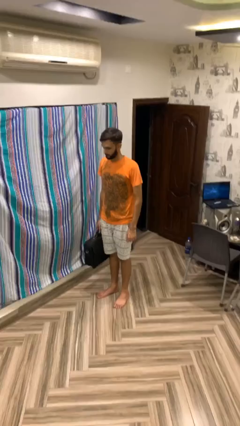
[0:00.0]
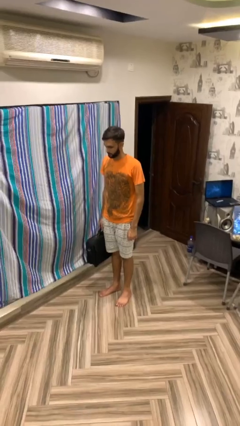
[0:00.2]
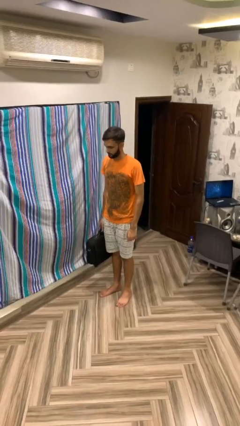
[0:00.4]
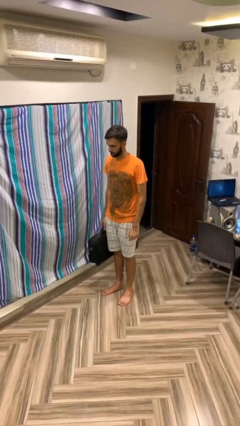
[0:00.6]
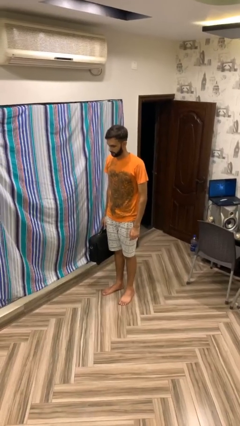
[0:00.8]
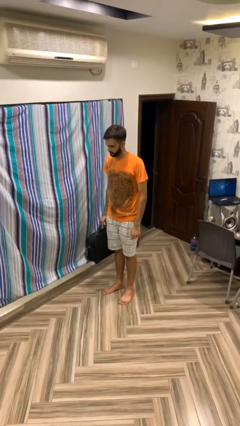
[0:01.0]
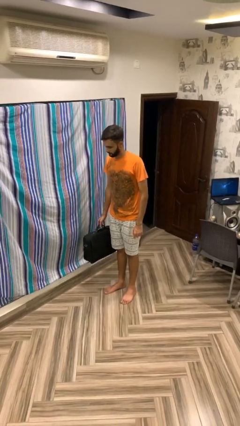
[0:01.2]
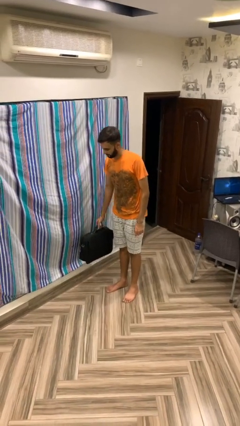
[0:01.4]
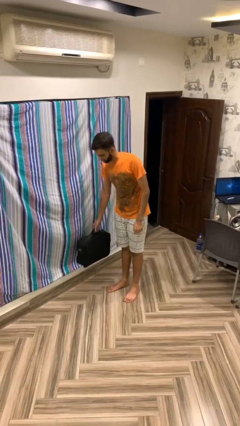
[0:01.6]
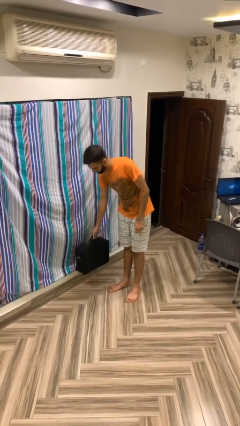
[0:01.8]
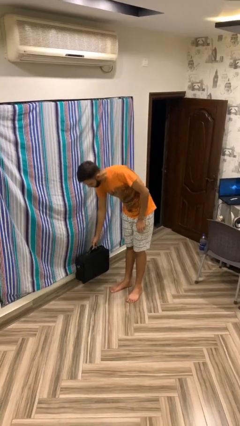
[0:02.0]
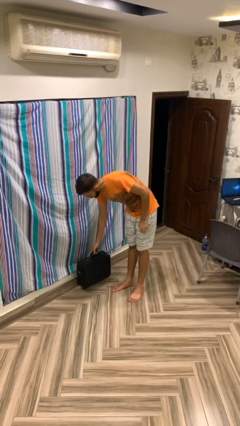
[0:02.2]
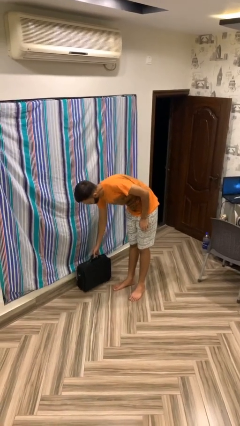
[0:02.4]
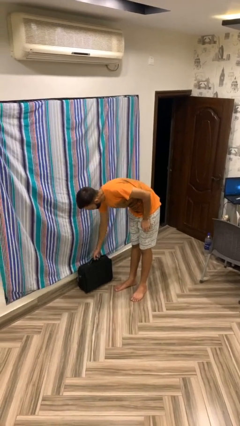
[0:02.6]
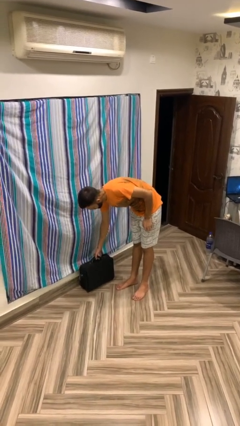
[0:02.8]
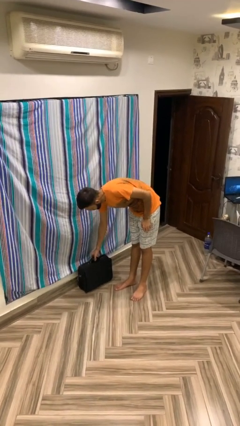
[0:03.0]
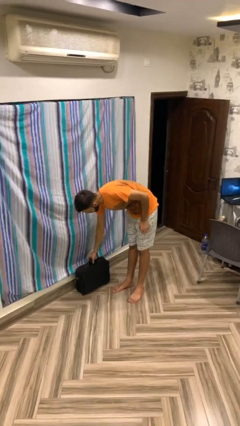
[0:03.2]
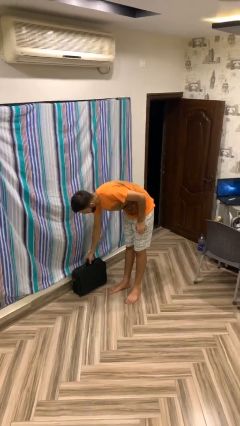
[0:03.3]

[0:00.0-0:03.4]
person puts down object on floor

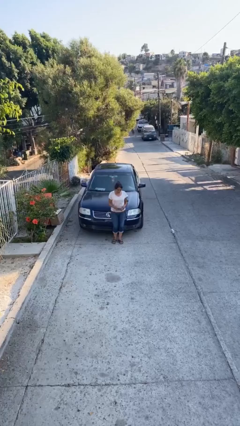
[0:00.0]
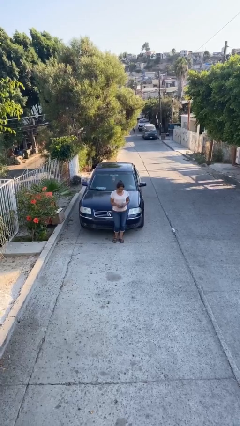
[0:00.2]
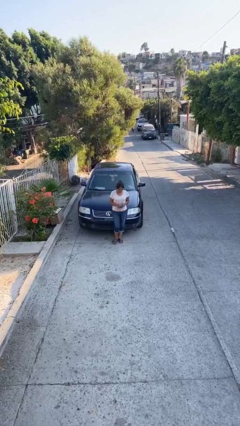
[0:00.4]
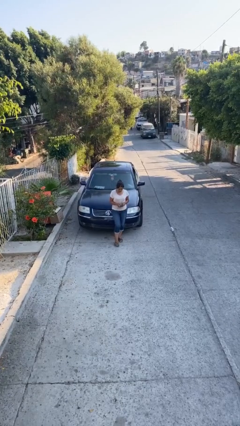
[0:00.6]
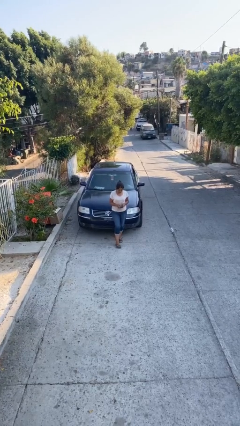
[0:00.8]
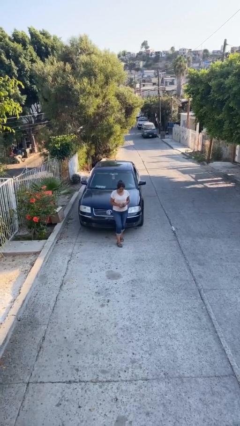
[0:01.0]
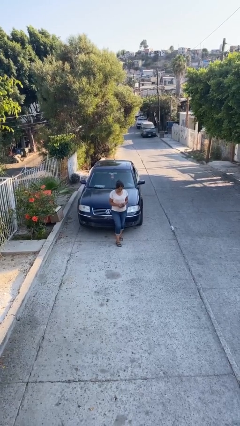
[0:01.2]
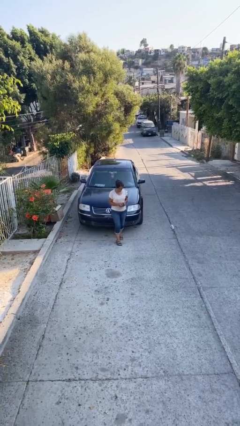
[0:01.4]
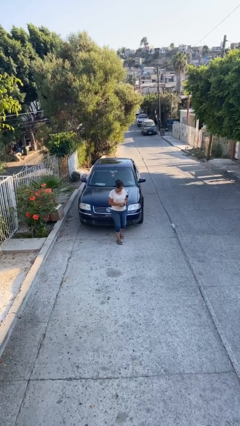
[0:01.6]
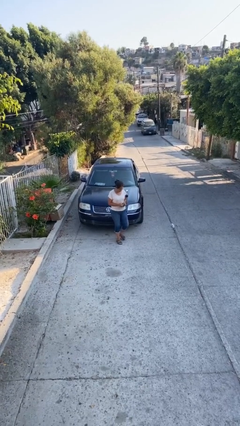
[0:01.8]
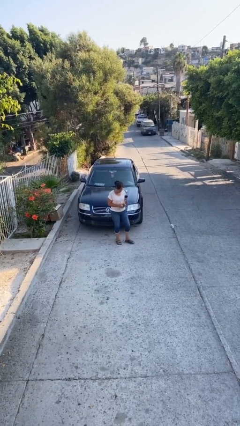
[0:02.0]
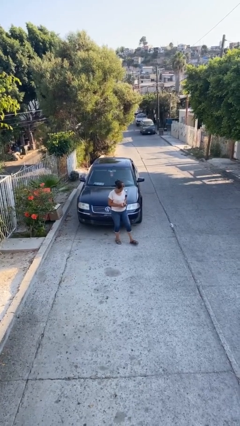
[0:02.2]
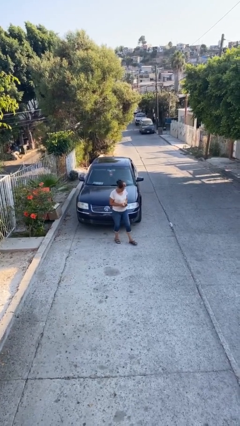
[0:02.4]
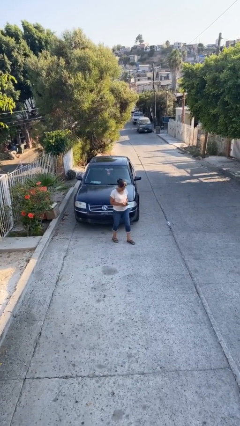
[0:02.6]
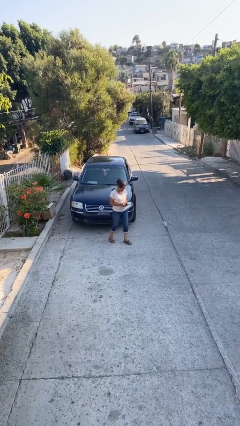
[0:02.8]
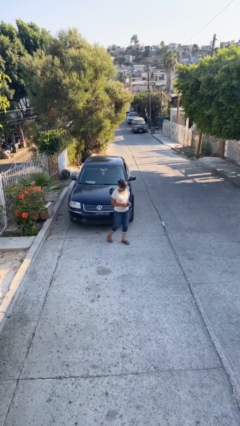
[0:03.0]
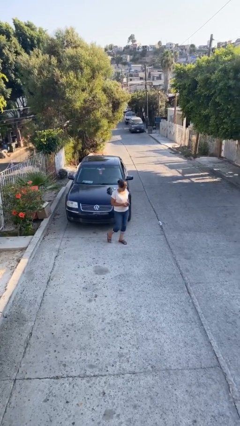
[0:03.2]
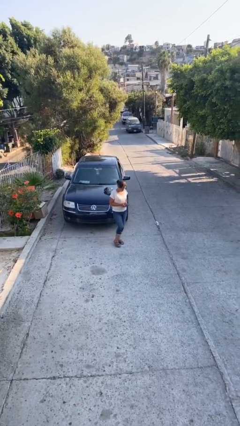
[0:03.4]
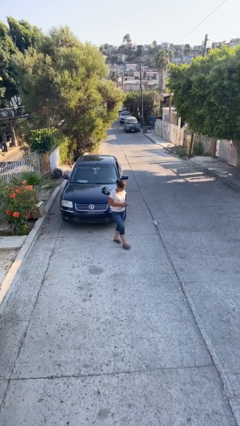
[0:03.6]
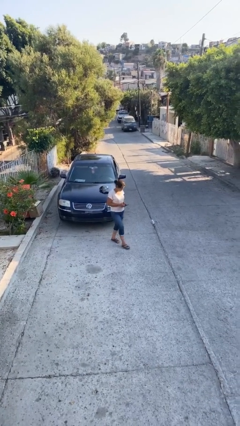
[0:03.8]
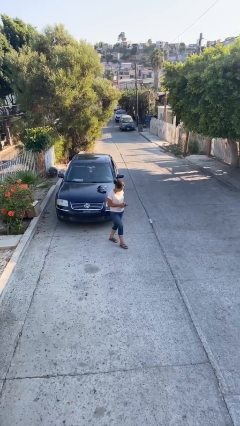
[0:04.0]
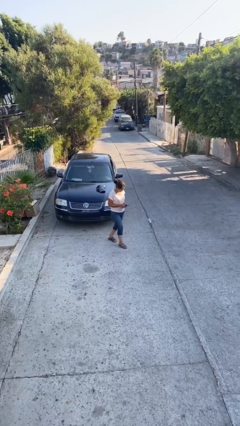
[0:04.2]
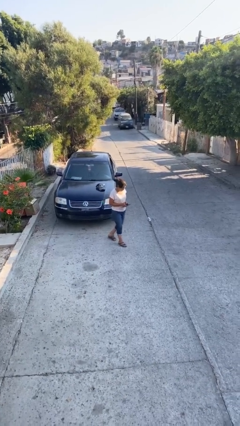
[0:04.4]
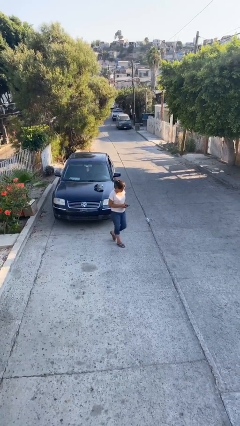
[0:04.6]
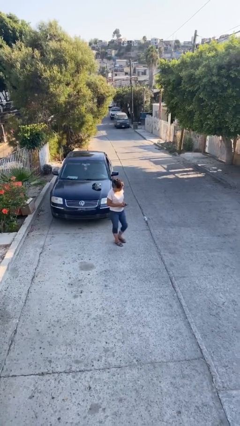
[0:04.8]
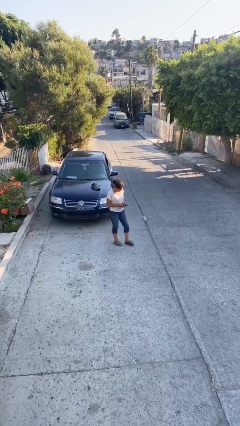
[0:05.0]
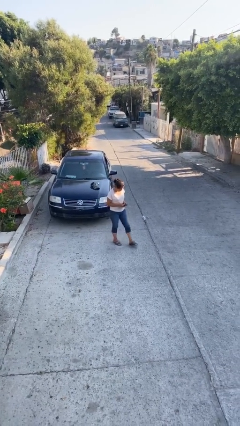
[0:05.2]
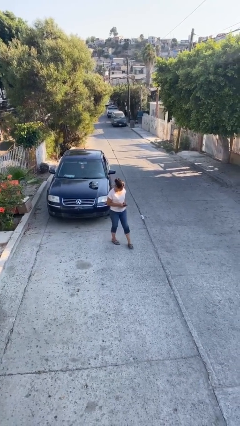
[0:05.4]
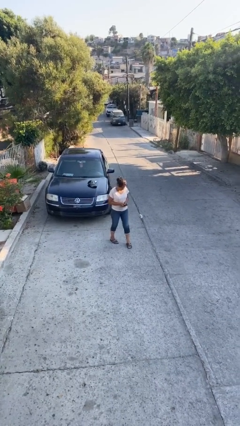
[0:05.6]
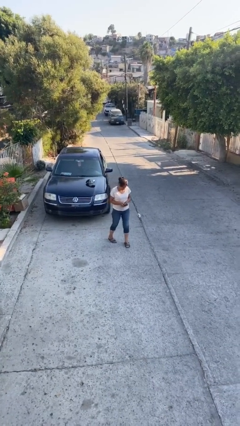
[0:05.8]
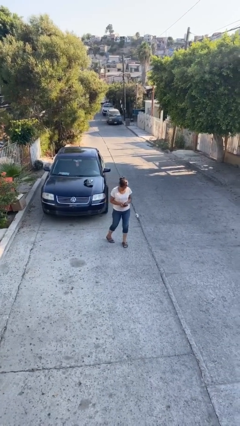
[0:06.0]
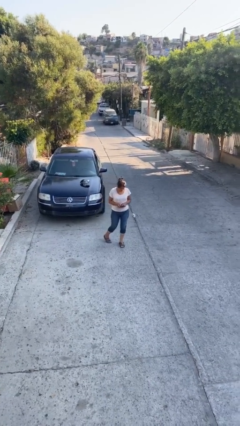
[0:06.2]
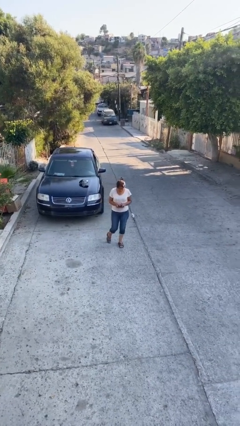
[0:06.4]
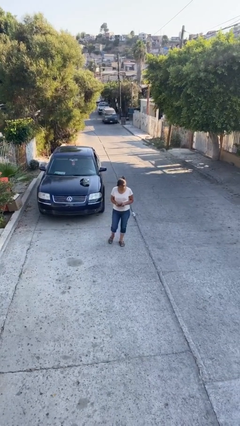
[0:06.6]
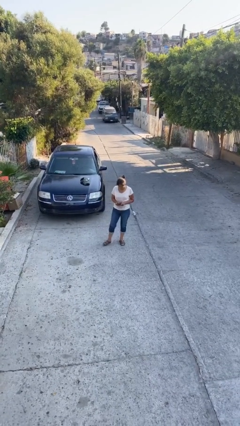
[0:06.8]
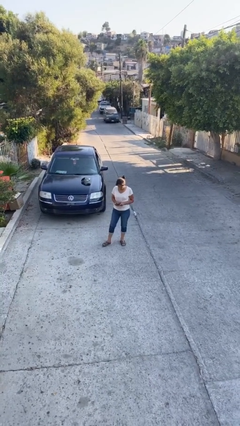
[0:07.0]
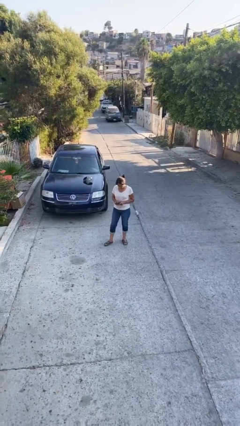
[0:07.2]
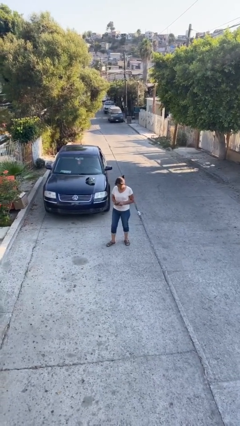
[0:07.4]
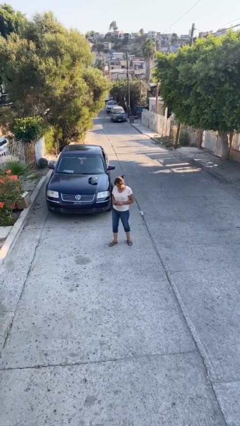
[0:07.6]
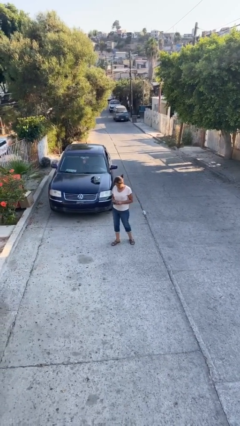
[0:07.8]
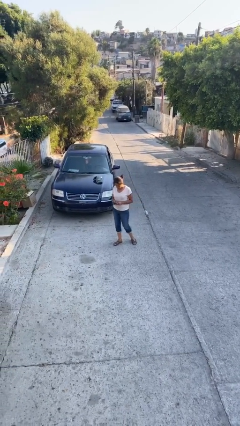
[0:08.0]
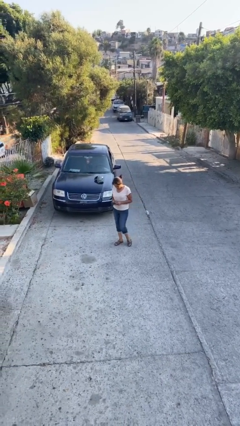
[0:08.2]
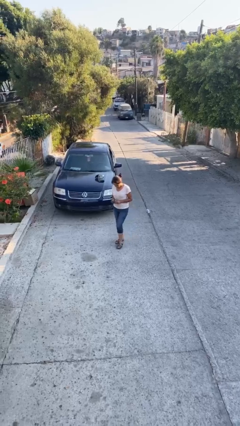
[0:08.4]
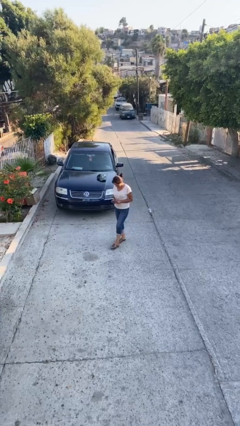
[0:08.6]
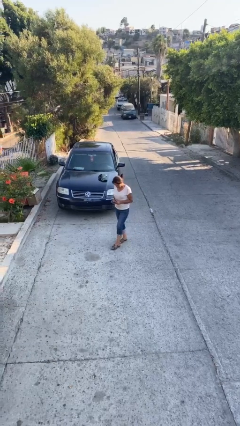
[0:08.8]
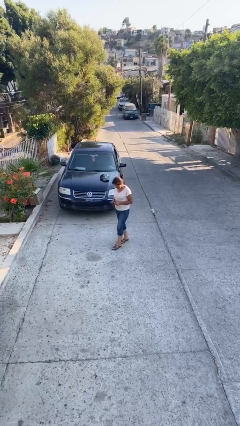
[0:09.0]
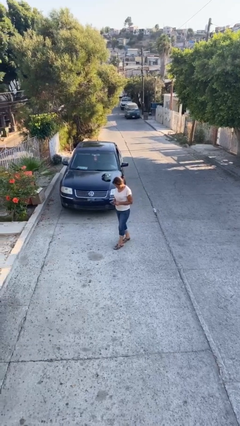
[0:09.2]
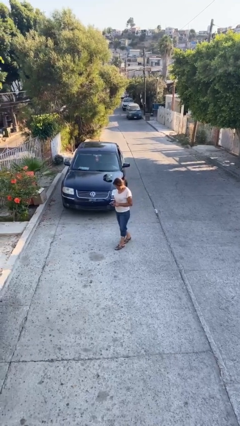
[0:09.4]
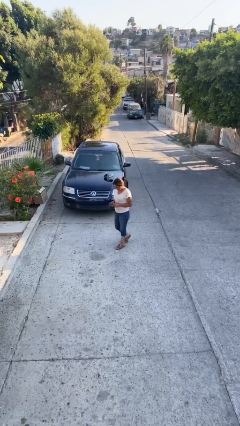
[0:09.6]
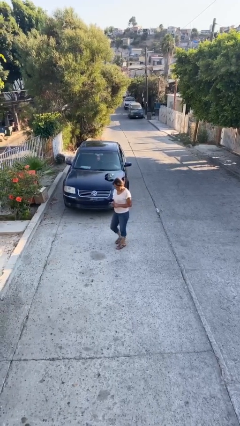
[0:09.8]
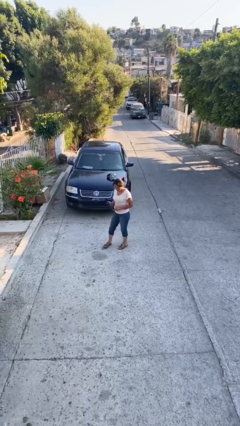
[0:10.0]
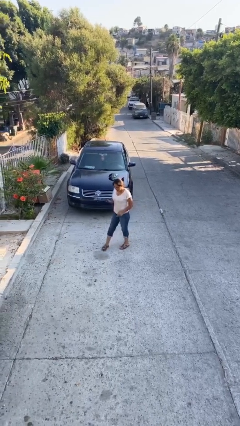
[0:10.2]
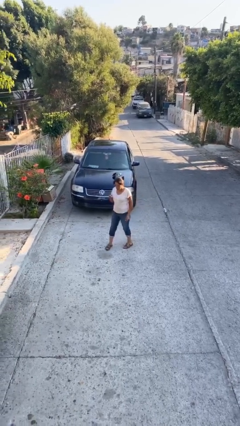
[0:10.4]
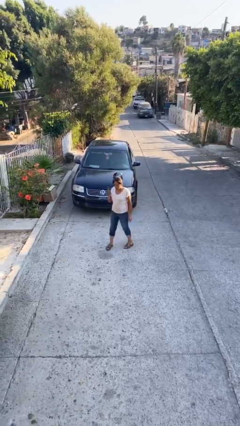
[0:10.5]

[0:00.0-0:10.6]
person texts on phone

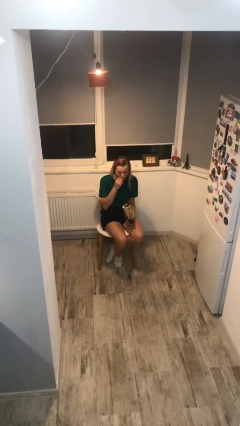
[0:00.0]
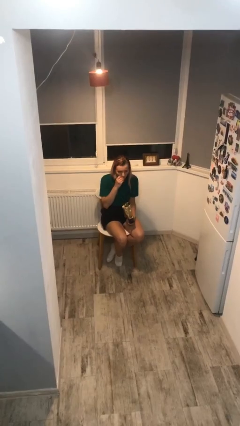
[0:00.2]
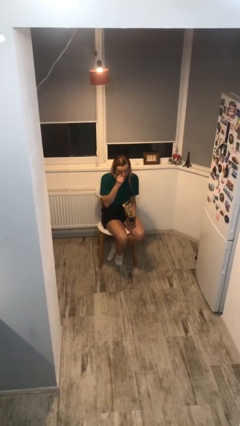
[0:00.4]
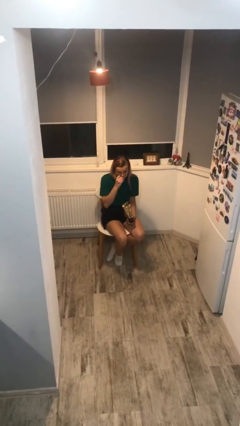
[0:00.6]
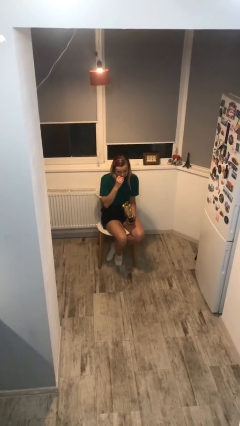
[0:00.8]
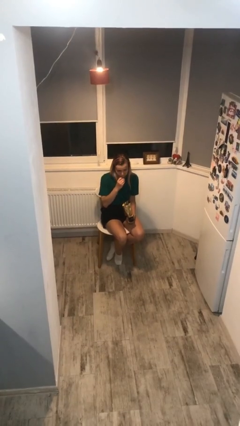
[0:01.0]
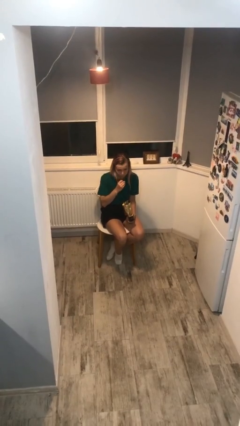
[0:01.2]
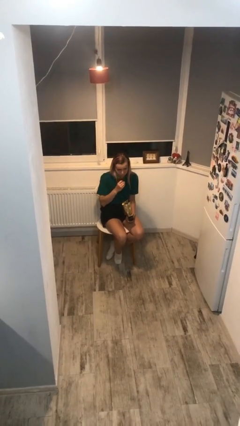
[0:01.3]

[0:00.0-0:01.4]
person eats snack from bag

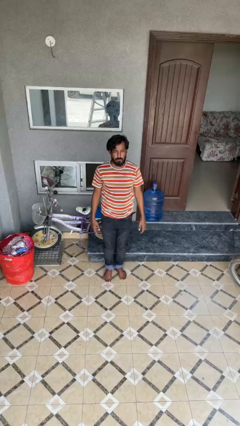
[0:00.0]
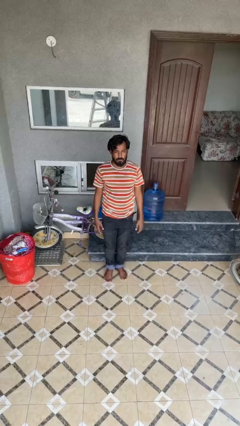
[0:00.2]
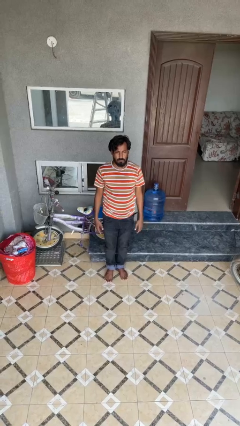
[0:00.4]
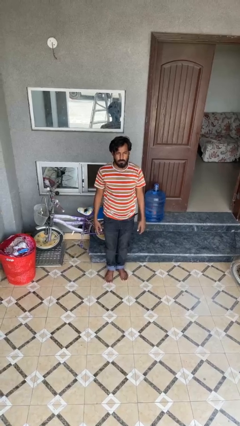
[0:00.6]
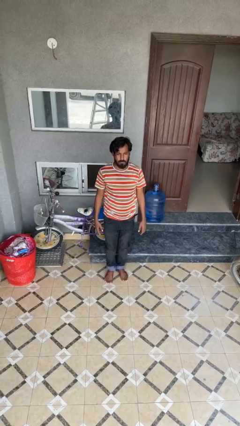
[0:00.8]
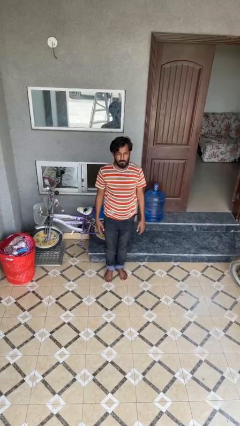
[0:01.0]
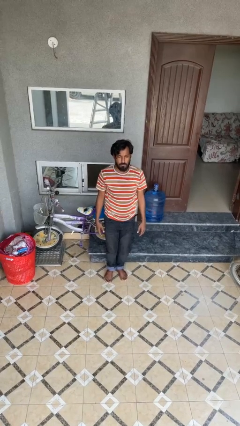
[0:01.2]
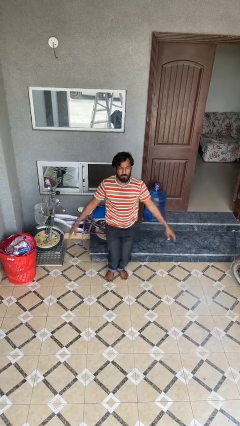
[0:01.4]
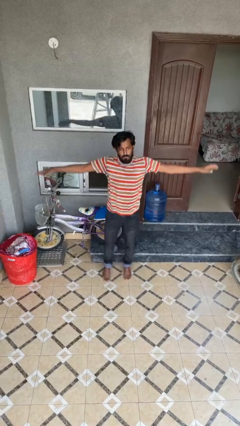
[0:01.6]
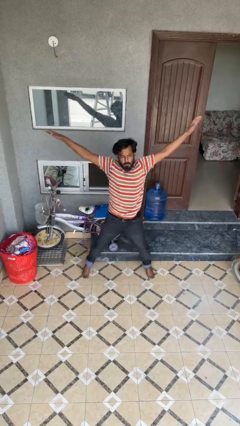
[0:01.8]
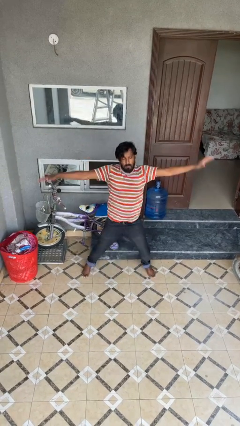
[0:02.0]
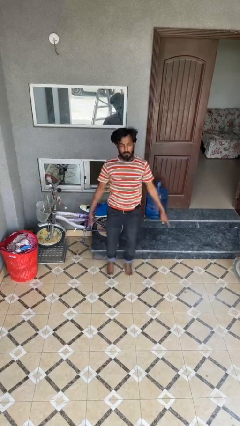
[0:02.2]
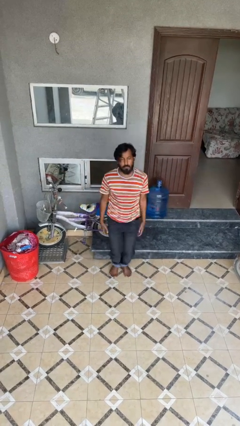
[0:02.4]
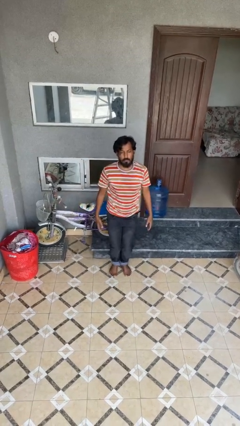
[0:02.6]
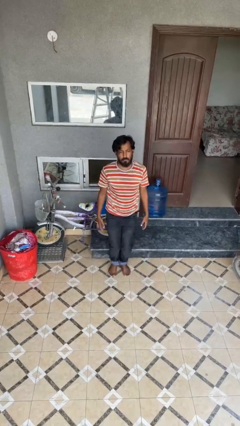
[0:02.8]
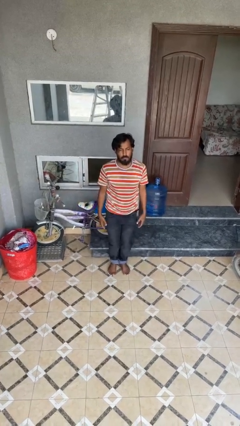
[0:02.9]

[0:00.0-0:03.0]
person exercises with jumping jacks
